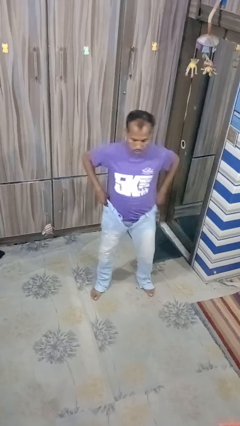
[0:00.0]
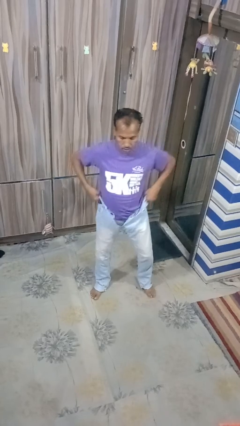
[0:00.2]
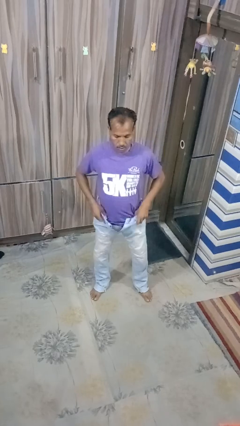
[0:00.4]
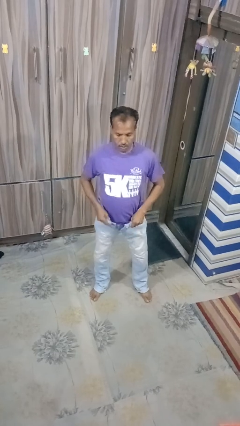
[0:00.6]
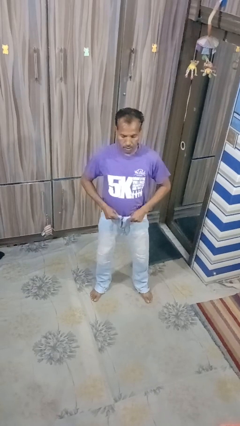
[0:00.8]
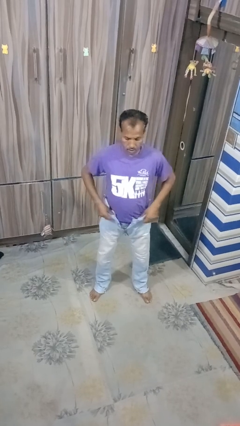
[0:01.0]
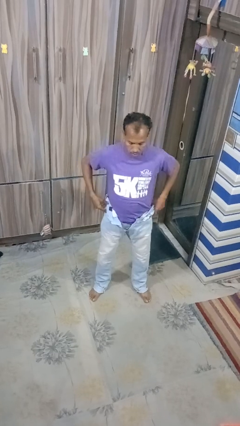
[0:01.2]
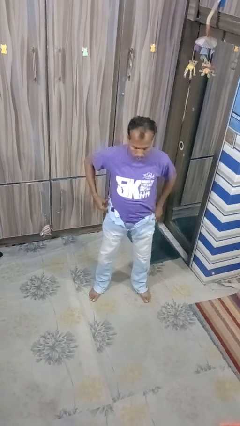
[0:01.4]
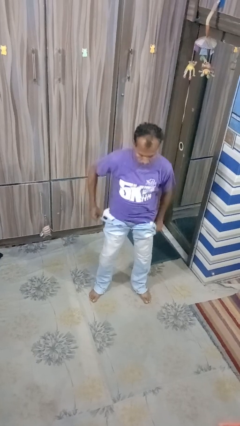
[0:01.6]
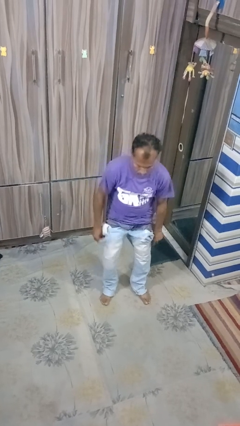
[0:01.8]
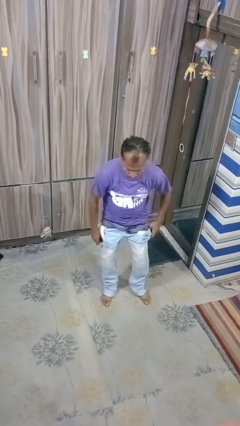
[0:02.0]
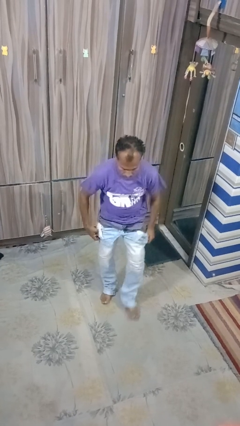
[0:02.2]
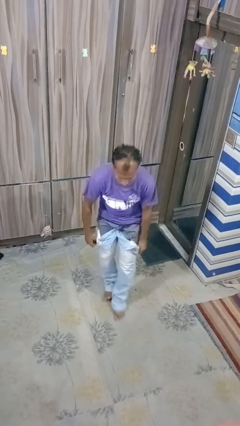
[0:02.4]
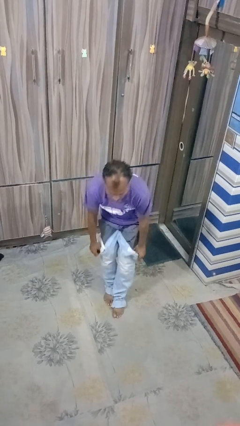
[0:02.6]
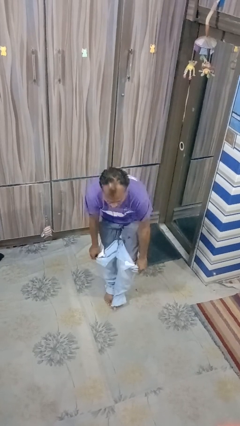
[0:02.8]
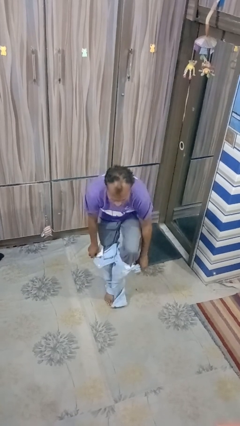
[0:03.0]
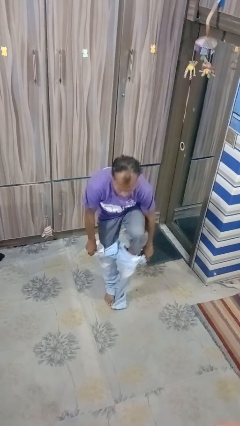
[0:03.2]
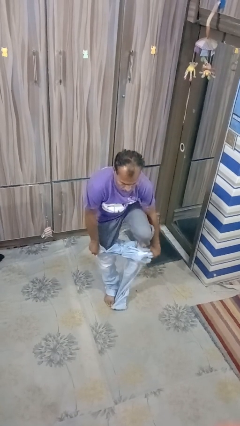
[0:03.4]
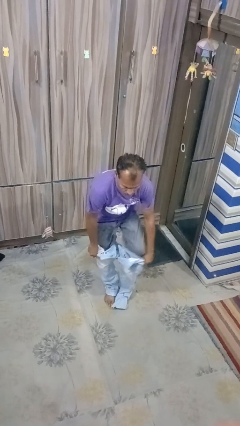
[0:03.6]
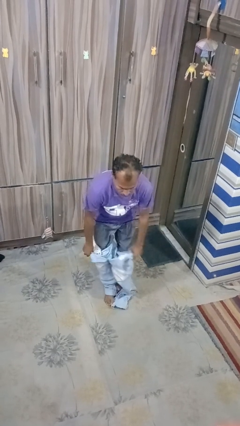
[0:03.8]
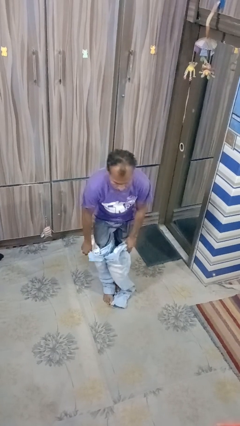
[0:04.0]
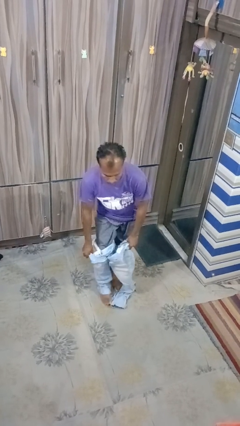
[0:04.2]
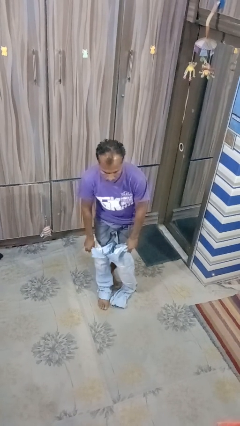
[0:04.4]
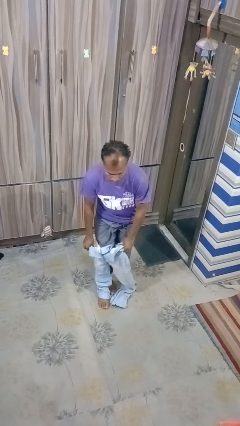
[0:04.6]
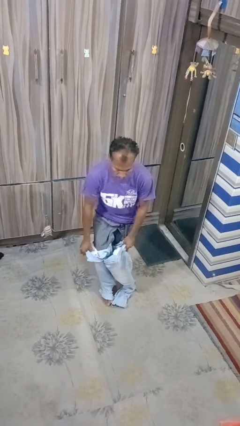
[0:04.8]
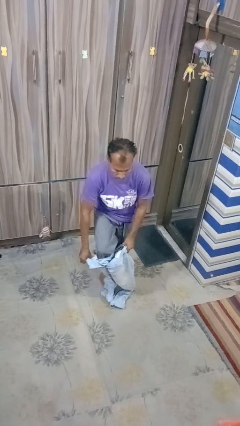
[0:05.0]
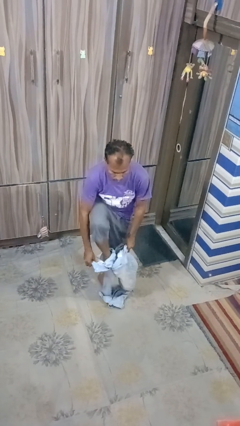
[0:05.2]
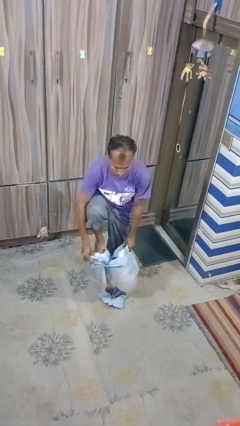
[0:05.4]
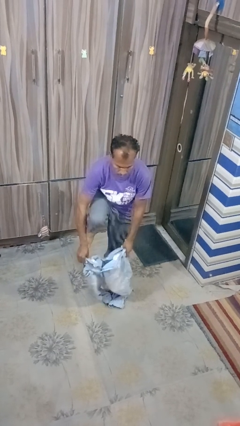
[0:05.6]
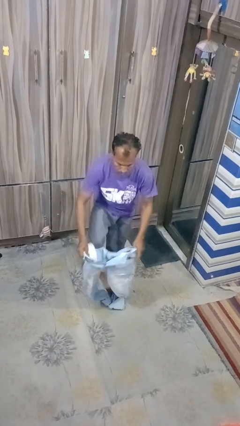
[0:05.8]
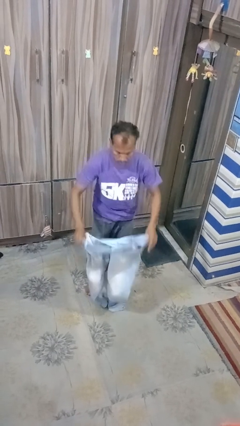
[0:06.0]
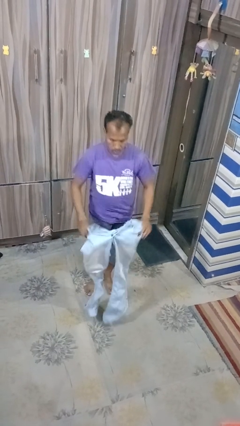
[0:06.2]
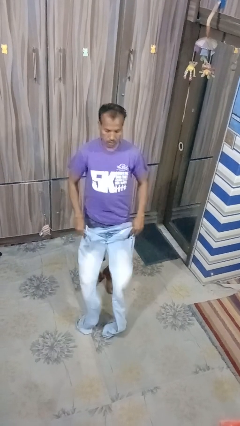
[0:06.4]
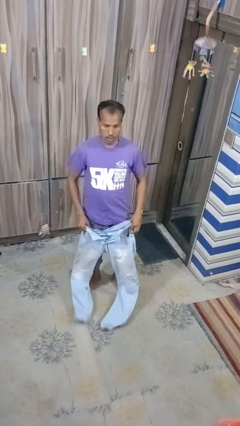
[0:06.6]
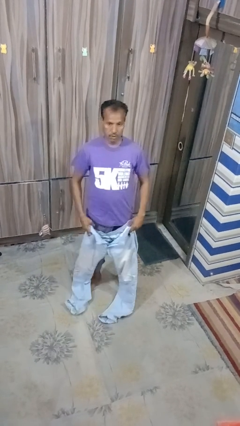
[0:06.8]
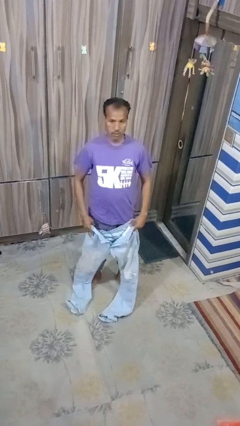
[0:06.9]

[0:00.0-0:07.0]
person takes off pants

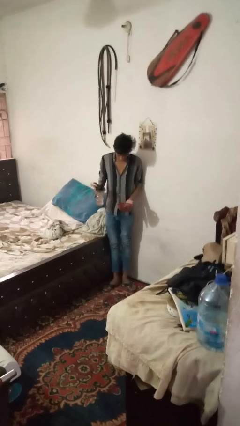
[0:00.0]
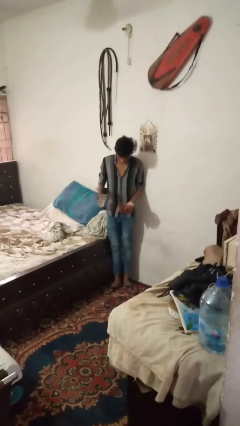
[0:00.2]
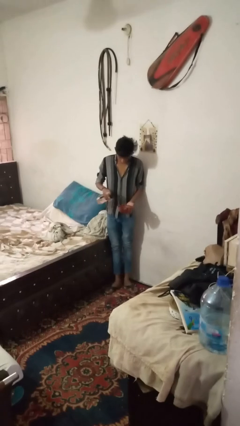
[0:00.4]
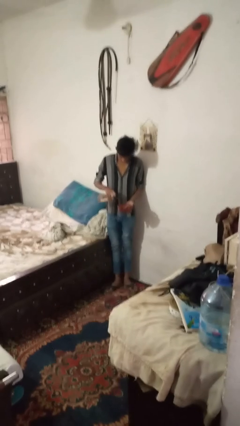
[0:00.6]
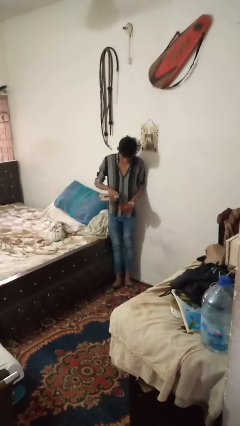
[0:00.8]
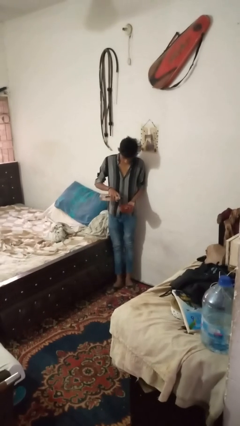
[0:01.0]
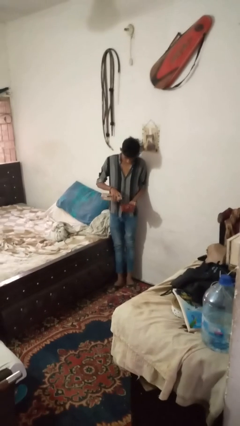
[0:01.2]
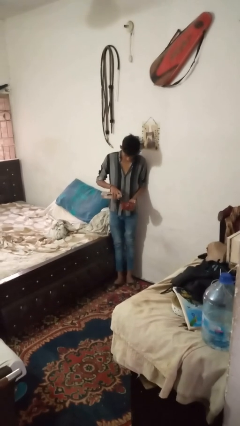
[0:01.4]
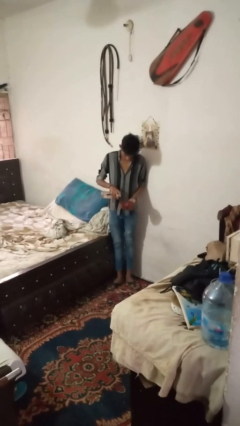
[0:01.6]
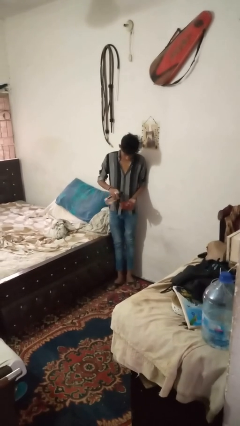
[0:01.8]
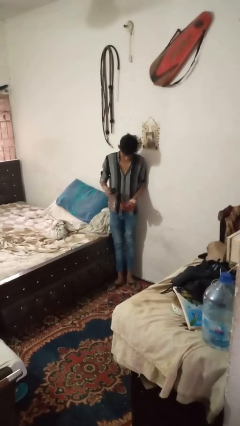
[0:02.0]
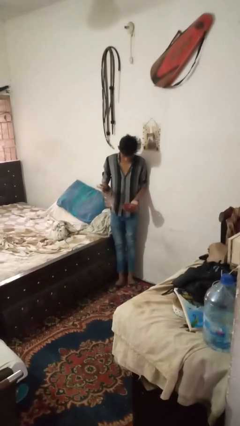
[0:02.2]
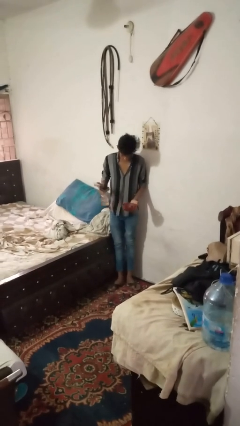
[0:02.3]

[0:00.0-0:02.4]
person pours liquid into cup

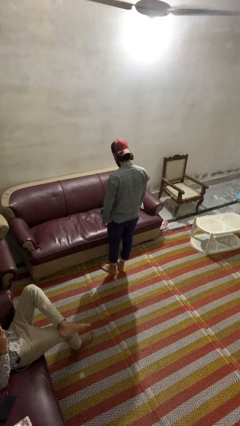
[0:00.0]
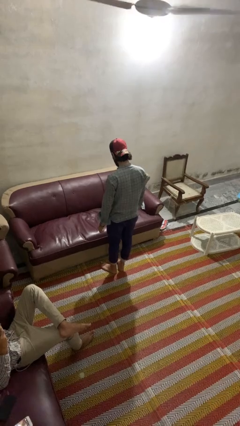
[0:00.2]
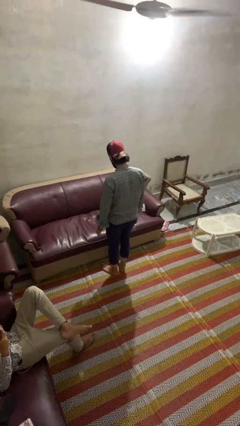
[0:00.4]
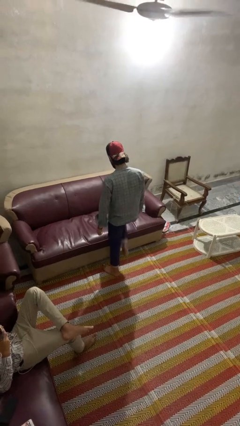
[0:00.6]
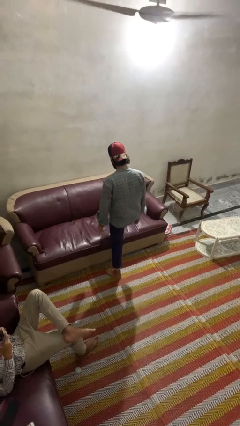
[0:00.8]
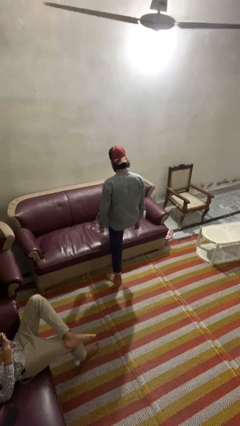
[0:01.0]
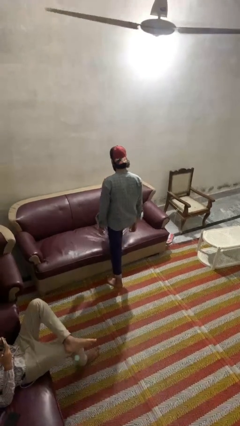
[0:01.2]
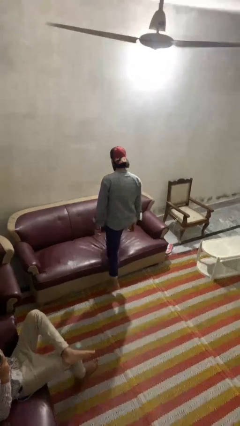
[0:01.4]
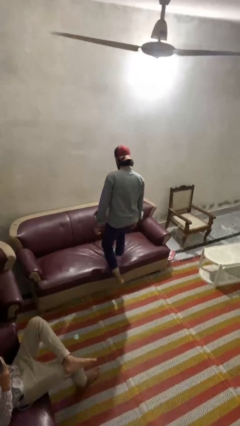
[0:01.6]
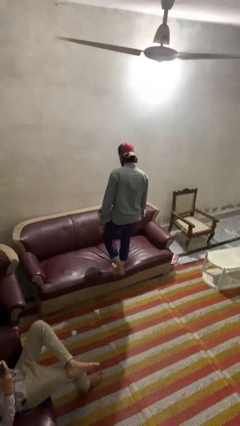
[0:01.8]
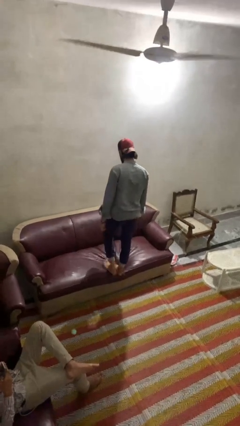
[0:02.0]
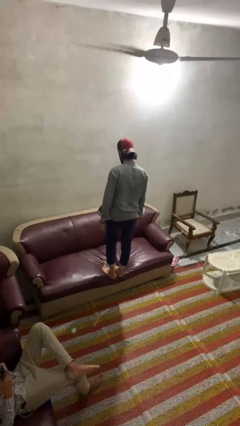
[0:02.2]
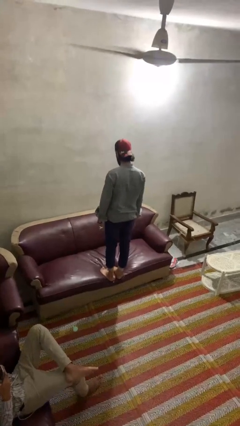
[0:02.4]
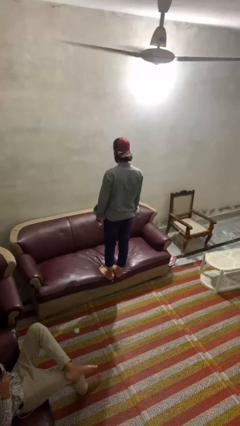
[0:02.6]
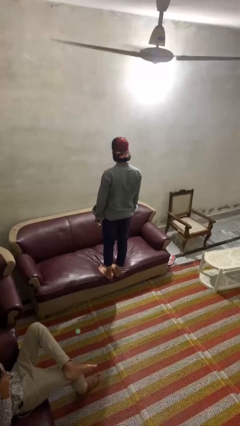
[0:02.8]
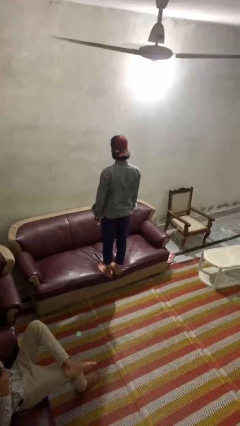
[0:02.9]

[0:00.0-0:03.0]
person climbs on couch

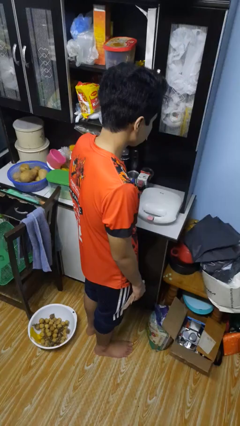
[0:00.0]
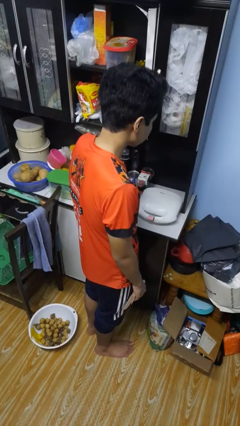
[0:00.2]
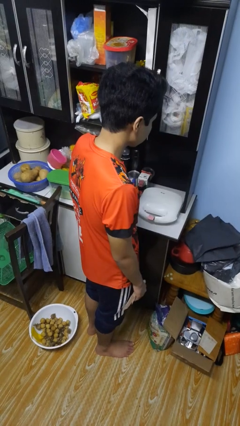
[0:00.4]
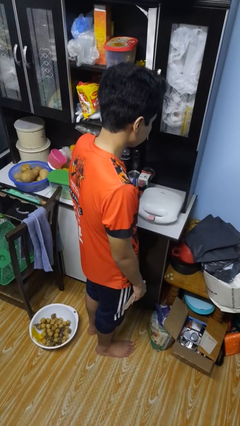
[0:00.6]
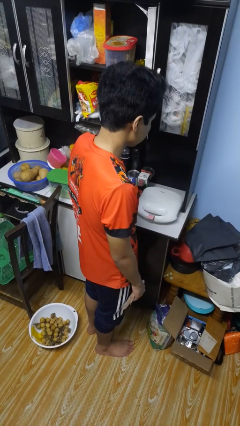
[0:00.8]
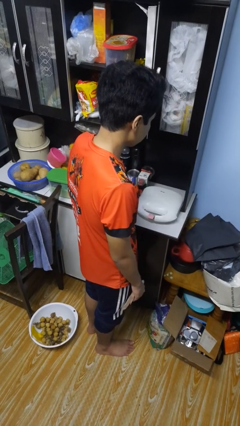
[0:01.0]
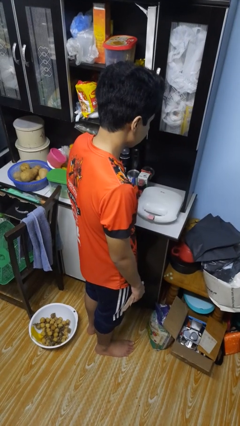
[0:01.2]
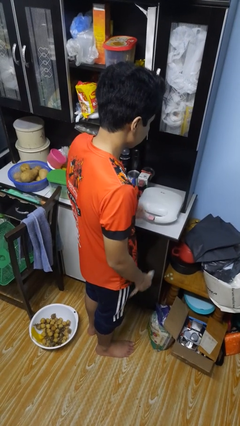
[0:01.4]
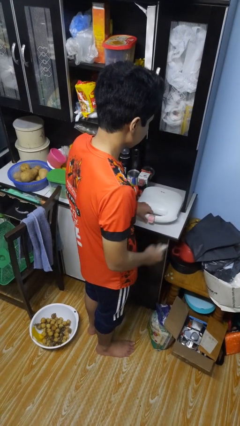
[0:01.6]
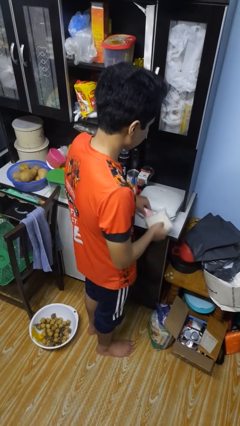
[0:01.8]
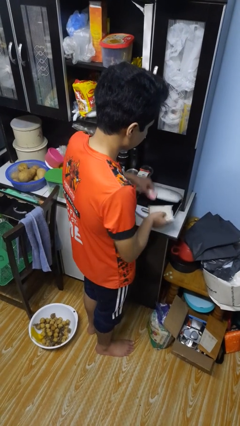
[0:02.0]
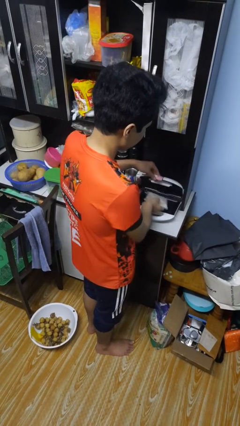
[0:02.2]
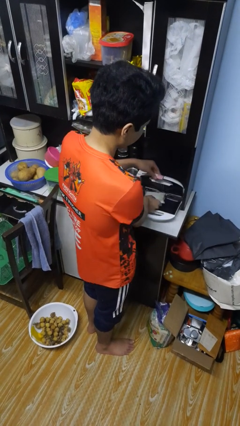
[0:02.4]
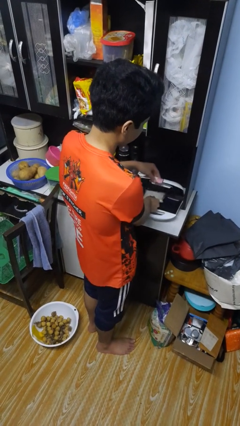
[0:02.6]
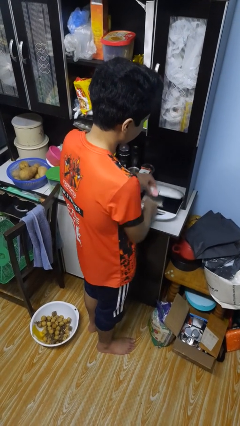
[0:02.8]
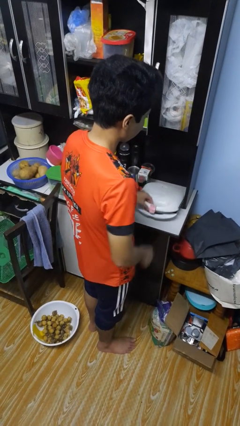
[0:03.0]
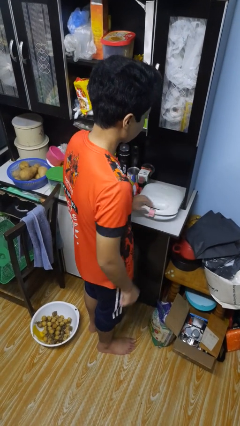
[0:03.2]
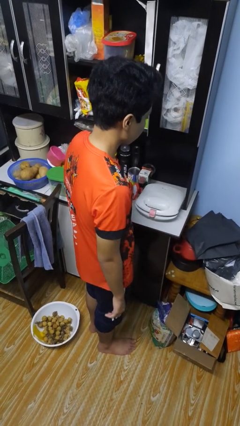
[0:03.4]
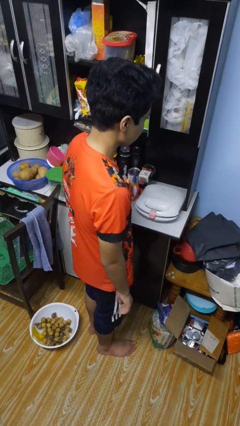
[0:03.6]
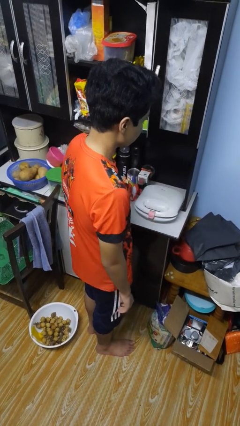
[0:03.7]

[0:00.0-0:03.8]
person puts object into toaster

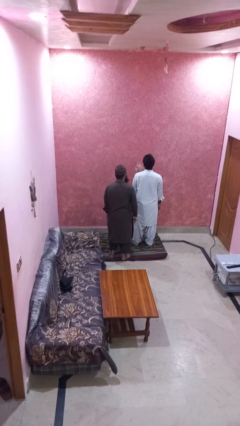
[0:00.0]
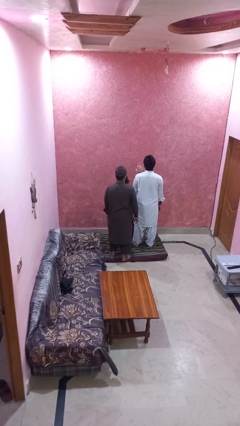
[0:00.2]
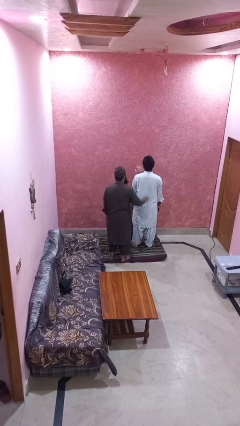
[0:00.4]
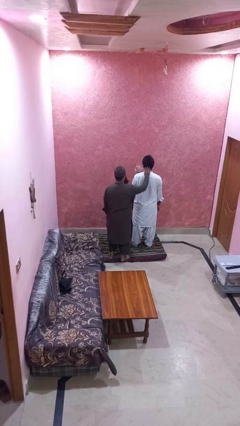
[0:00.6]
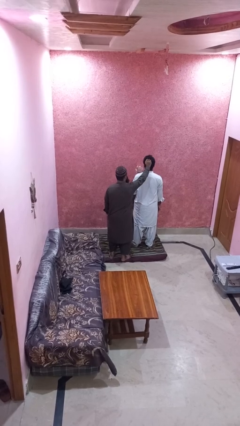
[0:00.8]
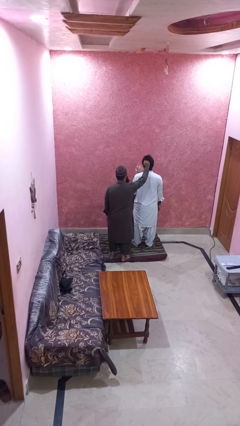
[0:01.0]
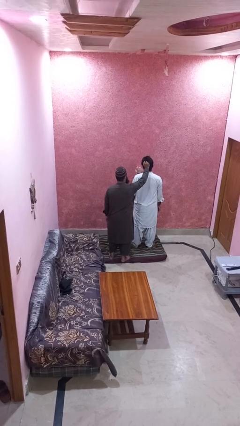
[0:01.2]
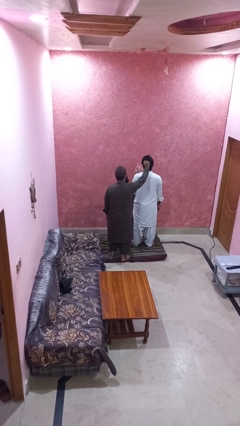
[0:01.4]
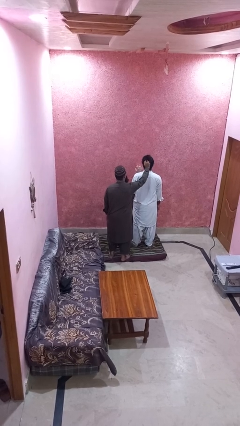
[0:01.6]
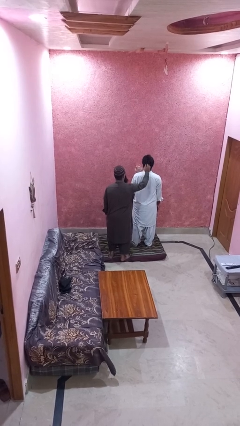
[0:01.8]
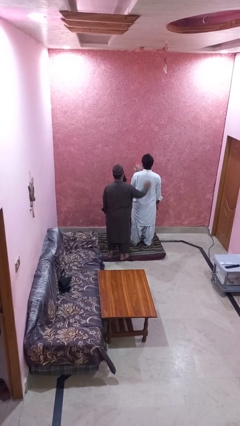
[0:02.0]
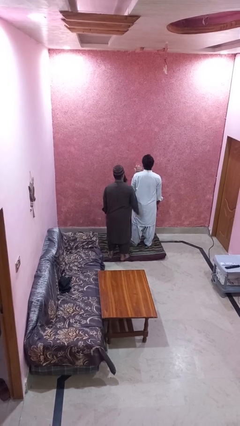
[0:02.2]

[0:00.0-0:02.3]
person grabs person by hair
